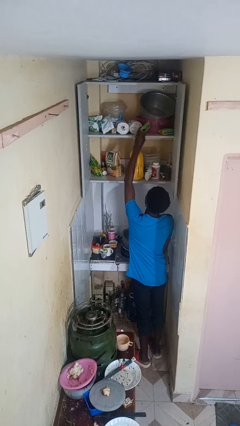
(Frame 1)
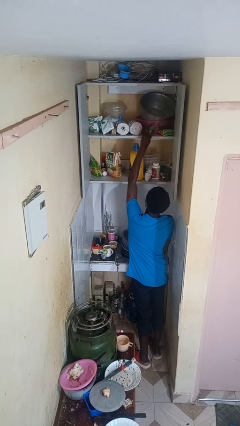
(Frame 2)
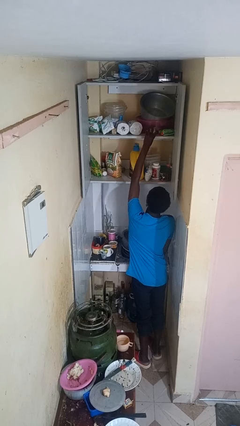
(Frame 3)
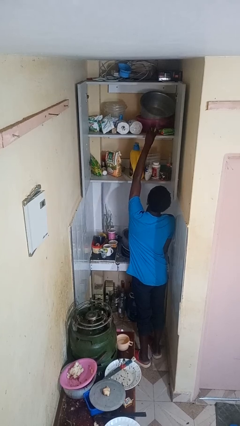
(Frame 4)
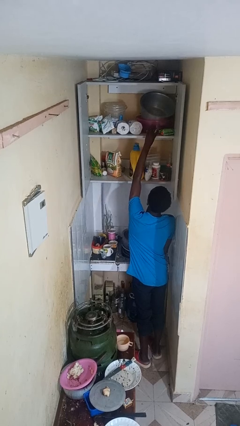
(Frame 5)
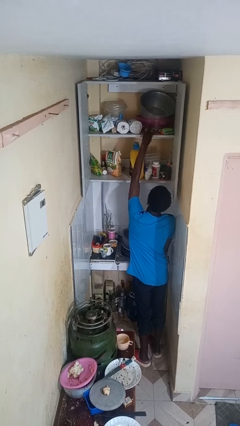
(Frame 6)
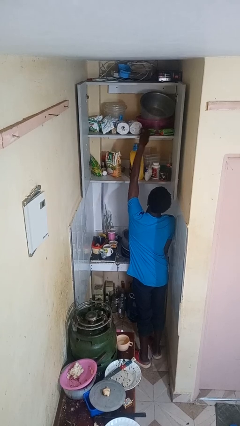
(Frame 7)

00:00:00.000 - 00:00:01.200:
person puts object in cabinet

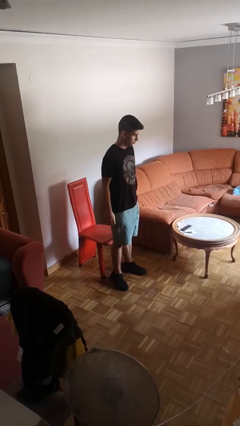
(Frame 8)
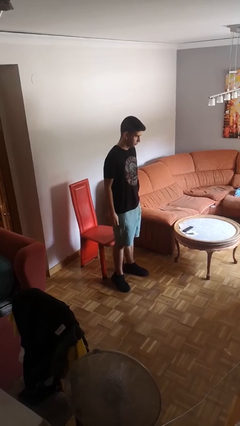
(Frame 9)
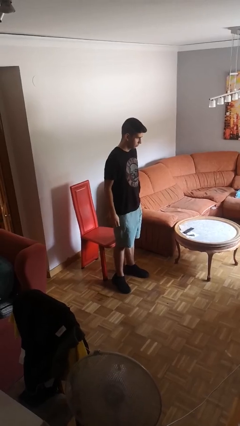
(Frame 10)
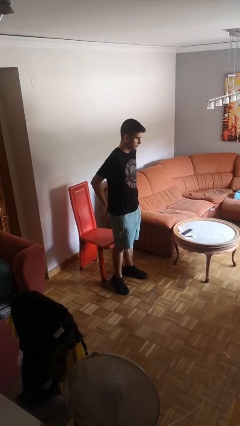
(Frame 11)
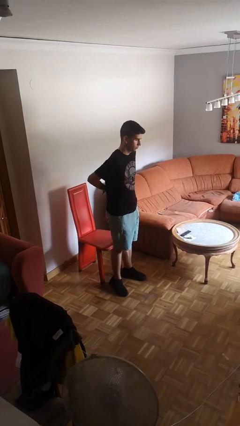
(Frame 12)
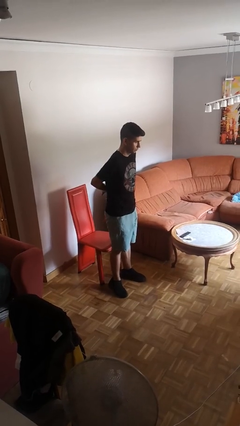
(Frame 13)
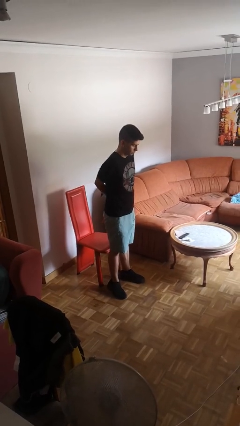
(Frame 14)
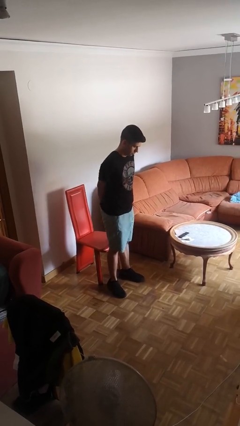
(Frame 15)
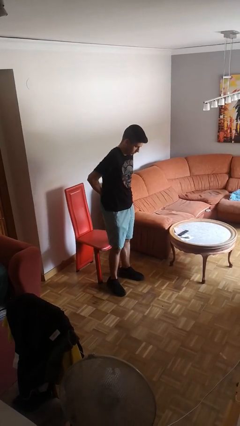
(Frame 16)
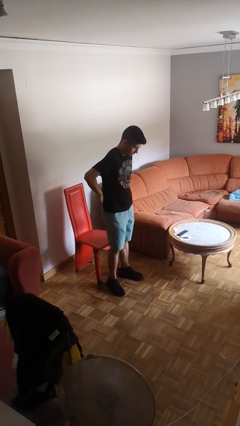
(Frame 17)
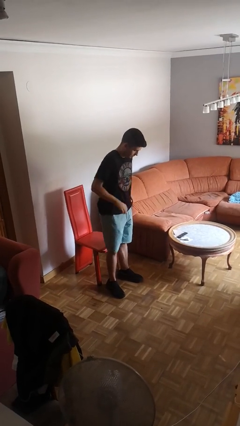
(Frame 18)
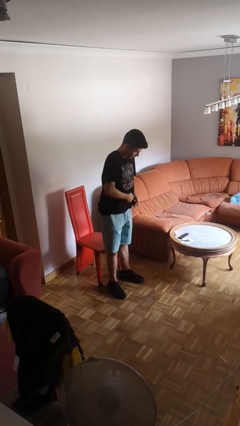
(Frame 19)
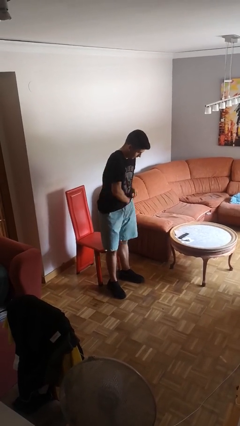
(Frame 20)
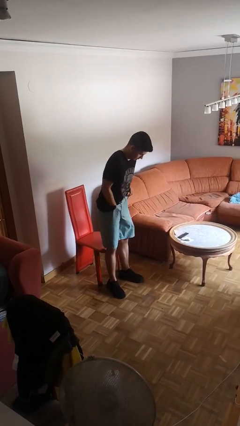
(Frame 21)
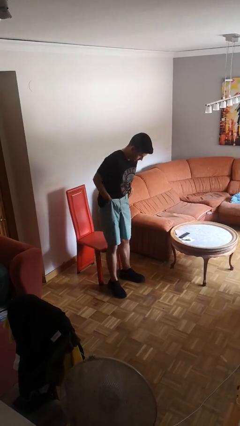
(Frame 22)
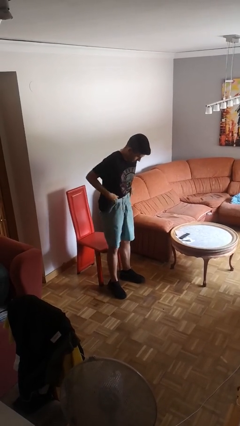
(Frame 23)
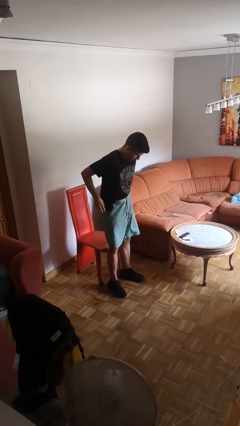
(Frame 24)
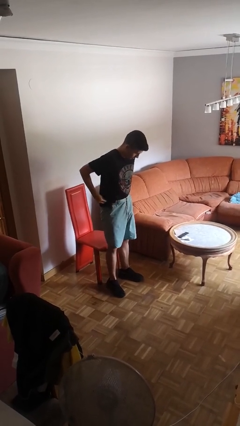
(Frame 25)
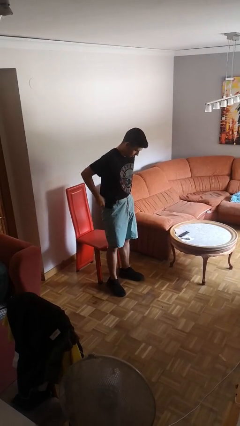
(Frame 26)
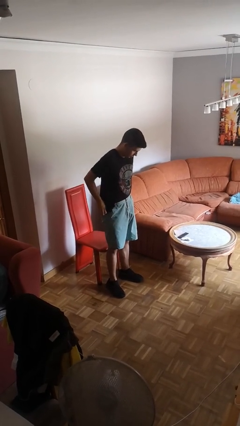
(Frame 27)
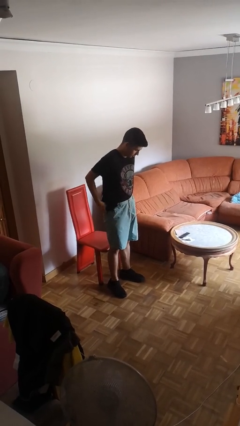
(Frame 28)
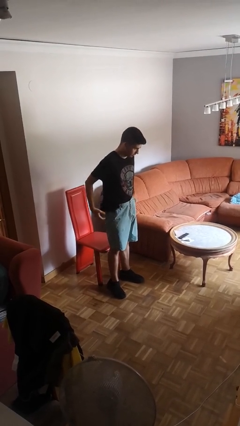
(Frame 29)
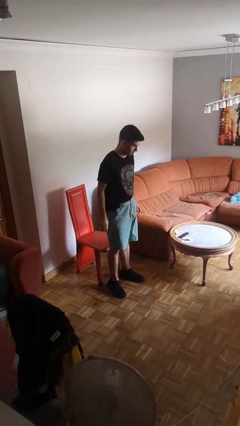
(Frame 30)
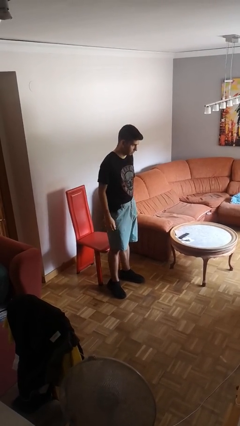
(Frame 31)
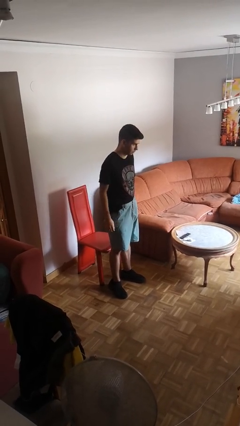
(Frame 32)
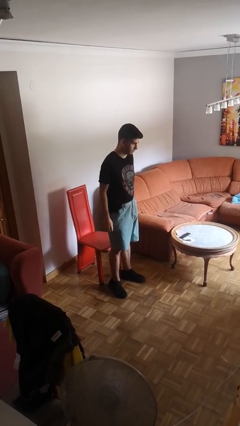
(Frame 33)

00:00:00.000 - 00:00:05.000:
person tucks in shirt

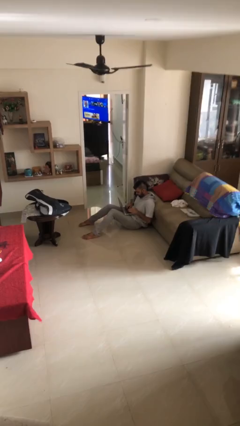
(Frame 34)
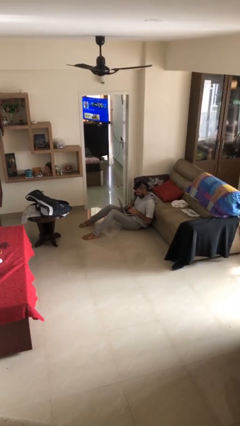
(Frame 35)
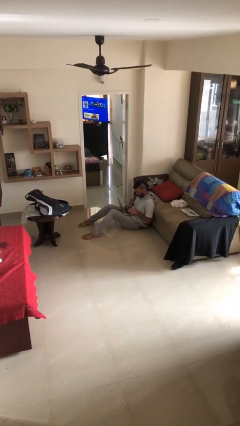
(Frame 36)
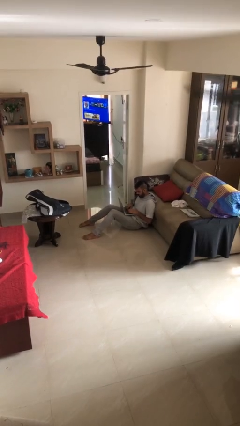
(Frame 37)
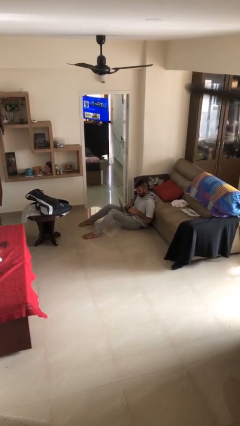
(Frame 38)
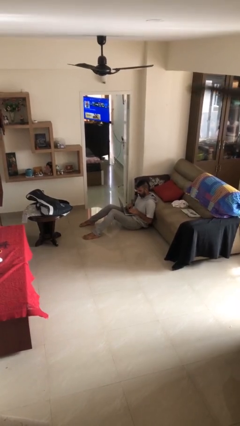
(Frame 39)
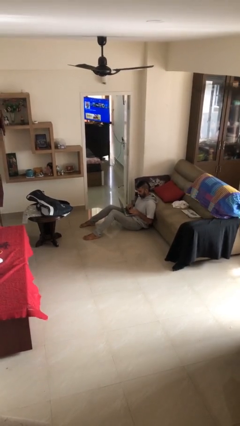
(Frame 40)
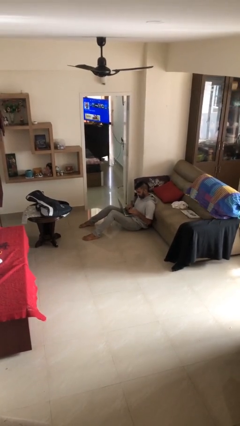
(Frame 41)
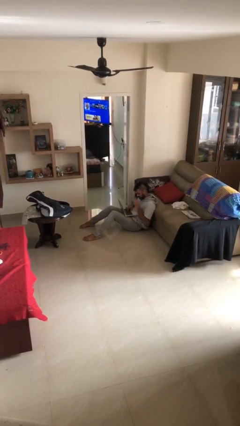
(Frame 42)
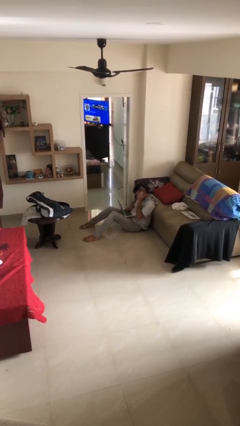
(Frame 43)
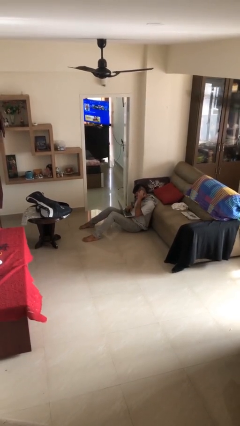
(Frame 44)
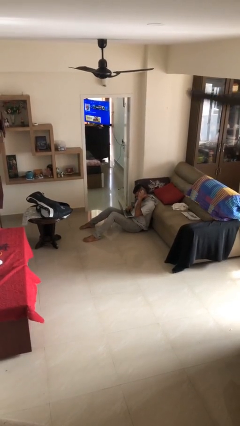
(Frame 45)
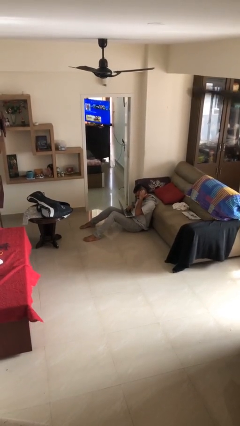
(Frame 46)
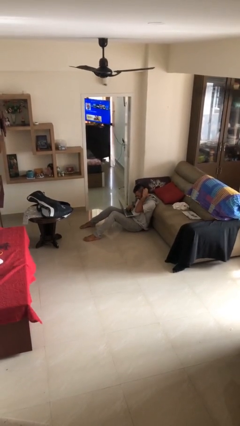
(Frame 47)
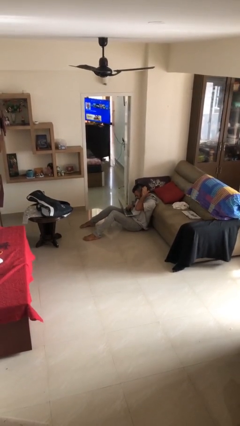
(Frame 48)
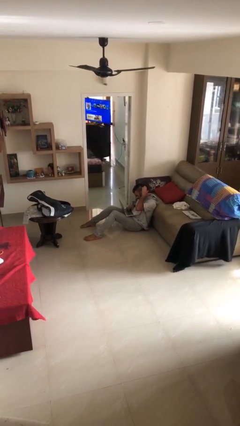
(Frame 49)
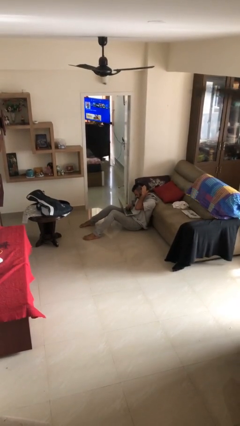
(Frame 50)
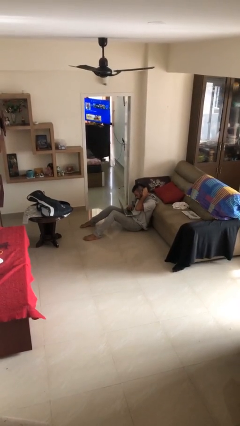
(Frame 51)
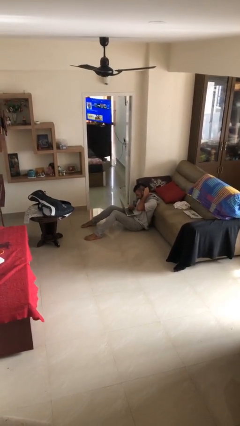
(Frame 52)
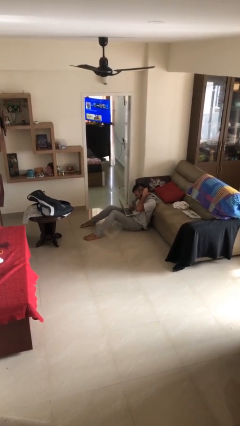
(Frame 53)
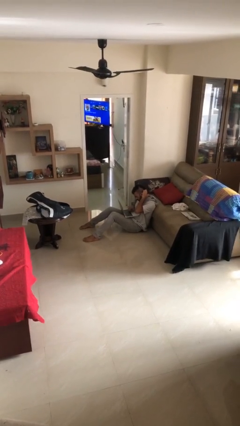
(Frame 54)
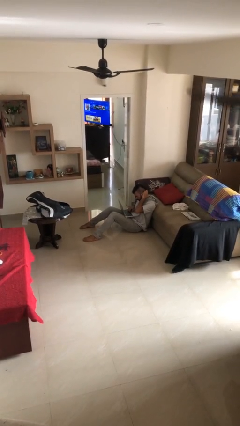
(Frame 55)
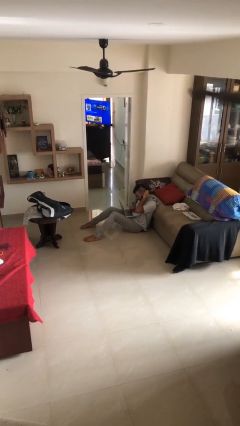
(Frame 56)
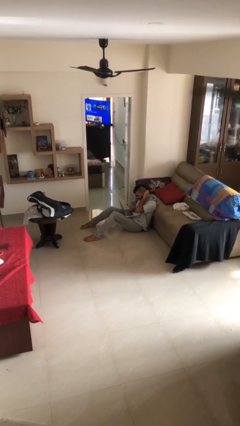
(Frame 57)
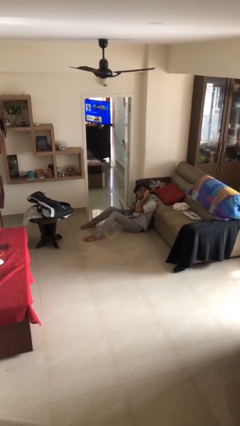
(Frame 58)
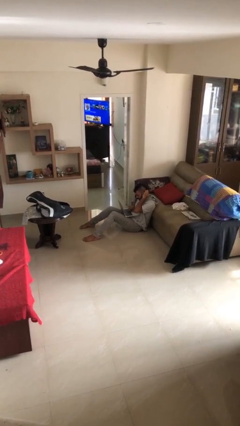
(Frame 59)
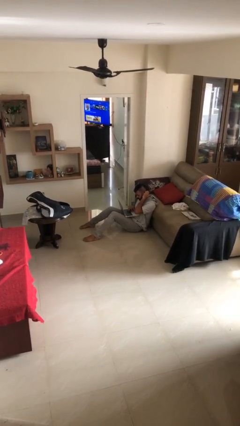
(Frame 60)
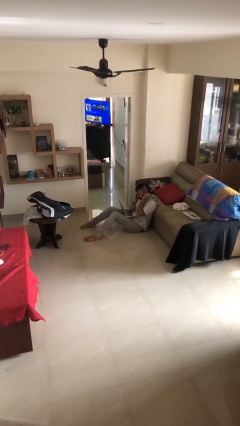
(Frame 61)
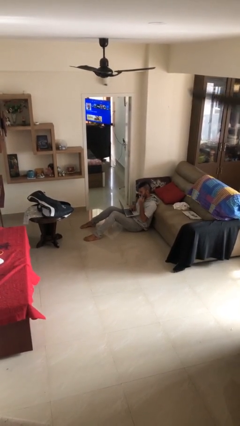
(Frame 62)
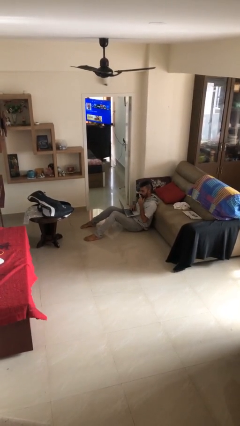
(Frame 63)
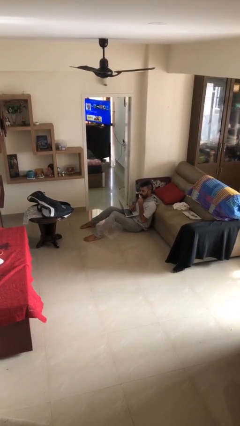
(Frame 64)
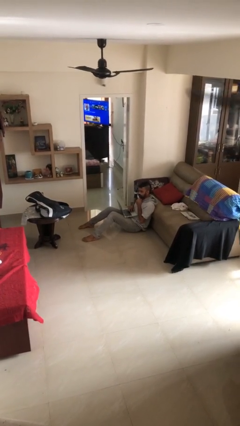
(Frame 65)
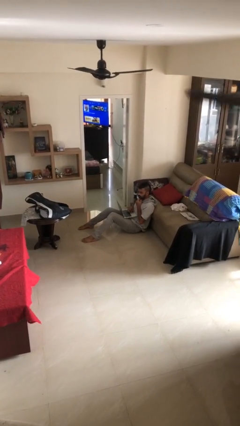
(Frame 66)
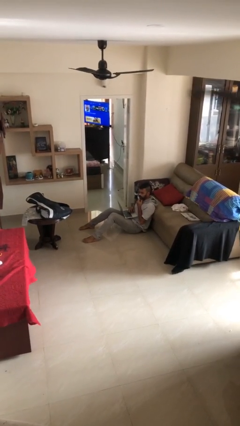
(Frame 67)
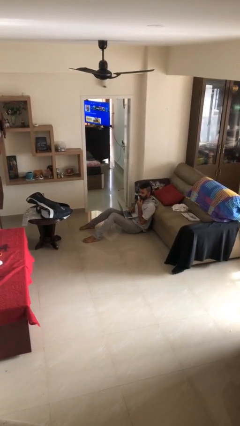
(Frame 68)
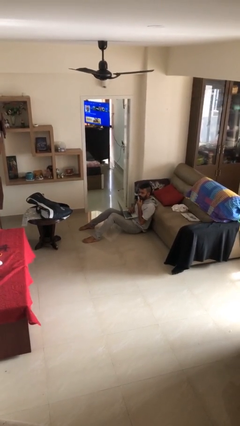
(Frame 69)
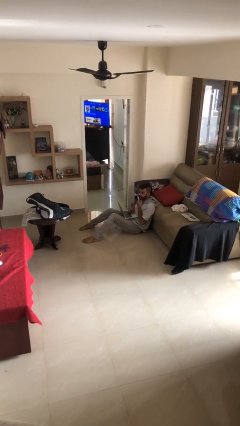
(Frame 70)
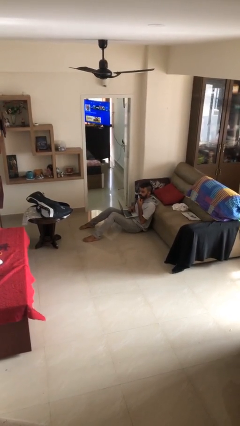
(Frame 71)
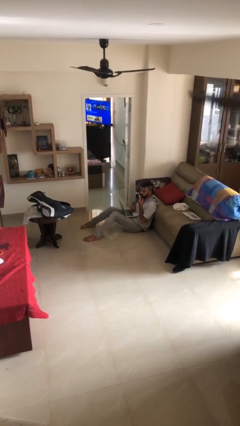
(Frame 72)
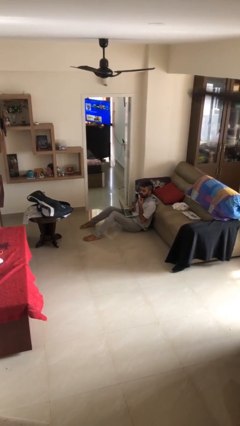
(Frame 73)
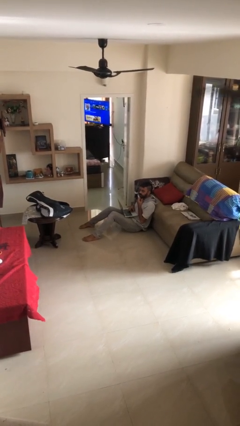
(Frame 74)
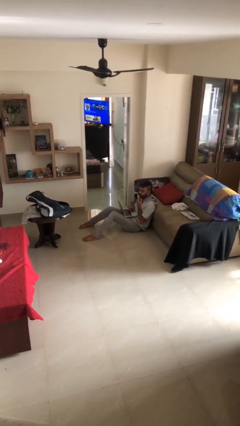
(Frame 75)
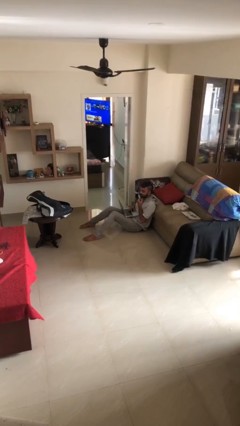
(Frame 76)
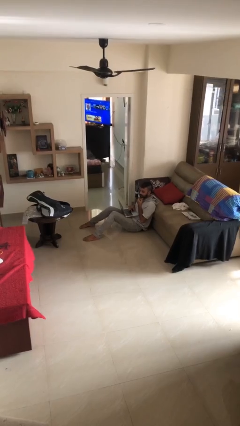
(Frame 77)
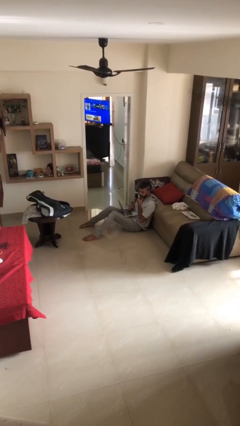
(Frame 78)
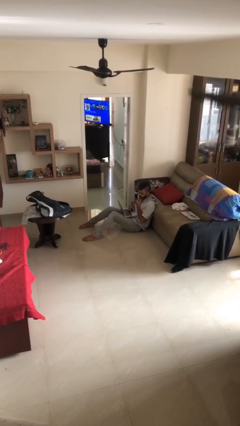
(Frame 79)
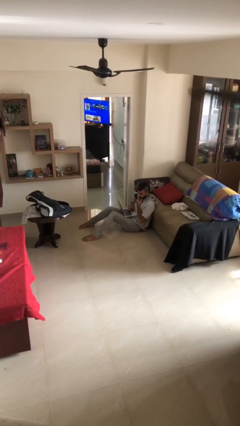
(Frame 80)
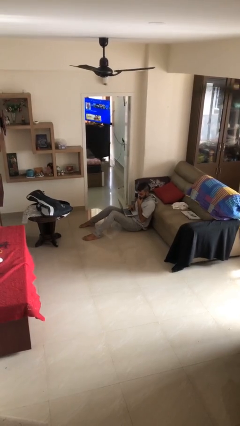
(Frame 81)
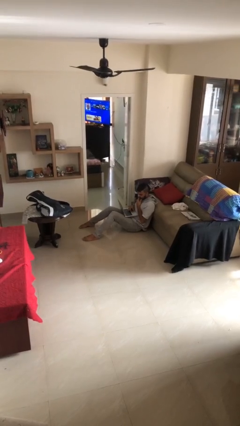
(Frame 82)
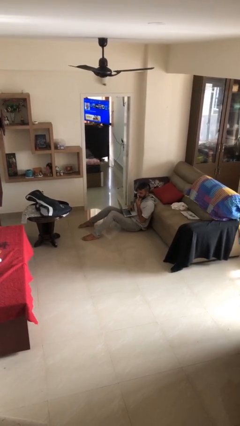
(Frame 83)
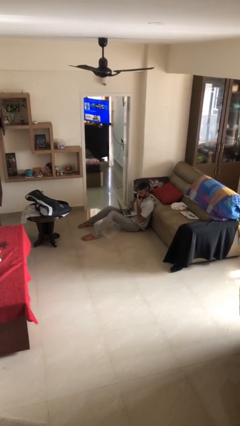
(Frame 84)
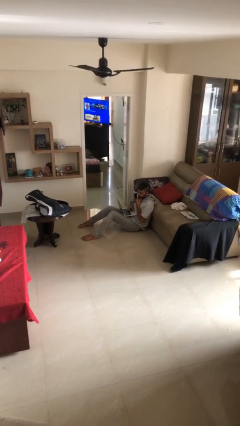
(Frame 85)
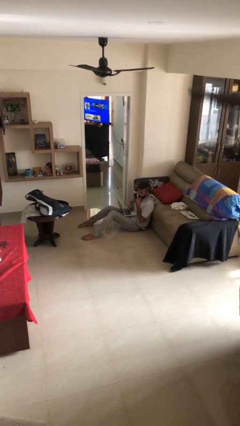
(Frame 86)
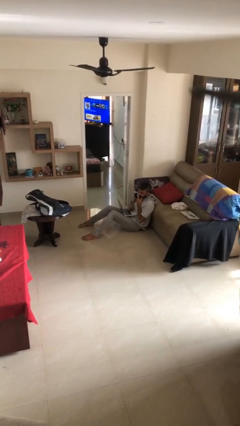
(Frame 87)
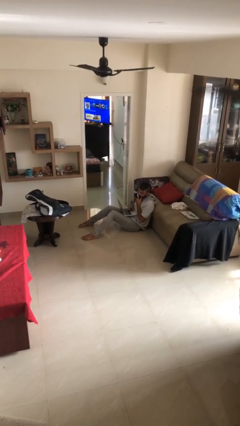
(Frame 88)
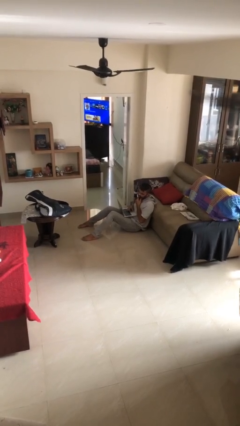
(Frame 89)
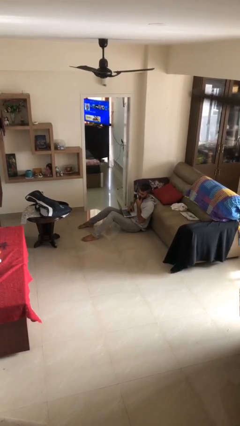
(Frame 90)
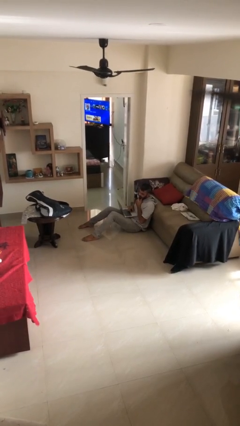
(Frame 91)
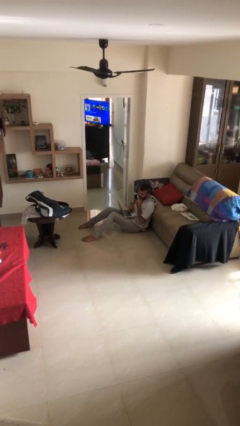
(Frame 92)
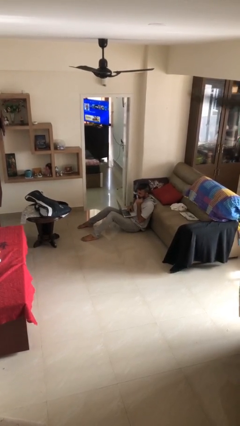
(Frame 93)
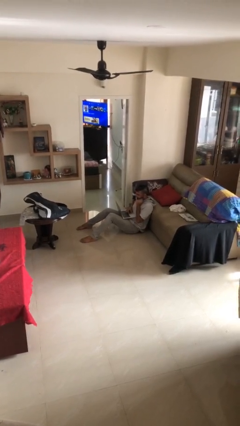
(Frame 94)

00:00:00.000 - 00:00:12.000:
person interacts with laptop
